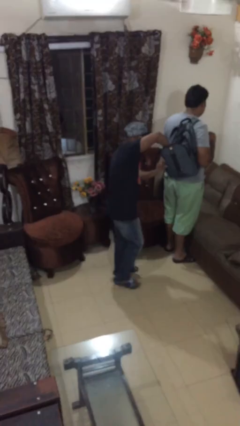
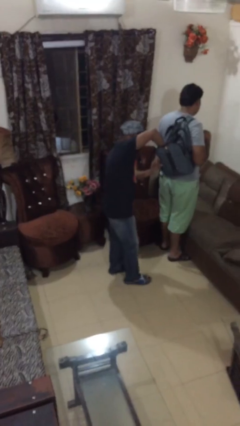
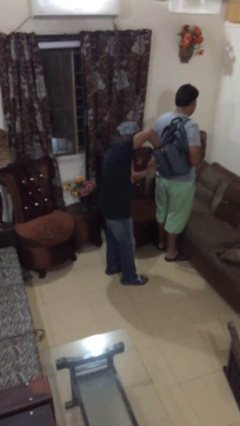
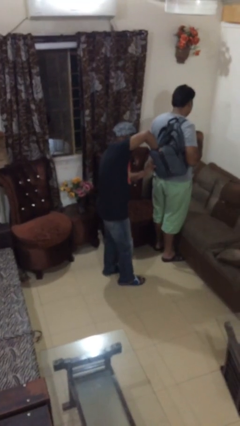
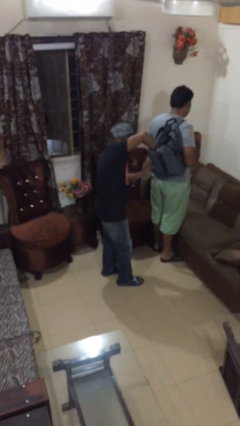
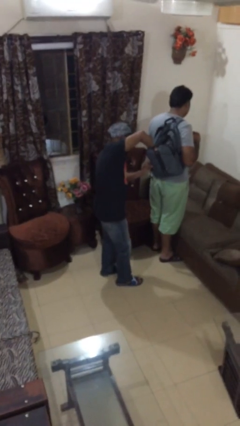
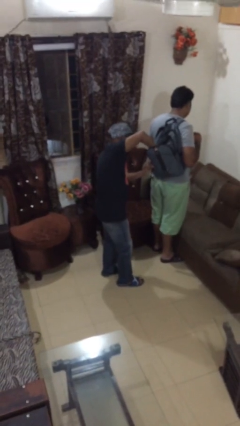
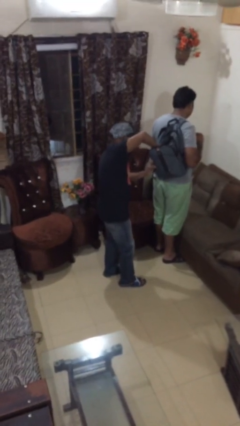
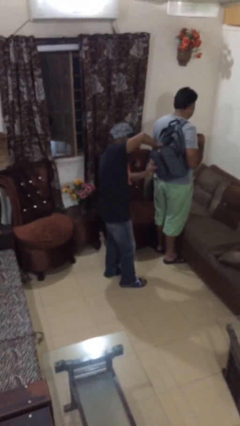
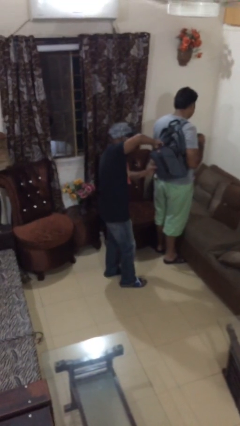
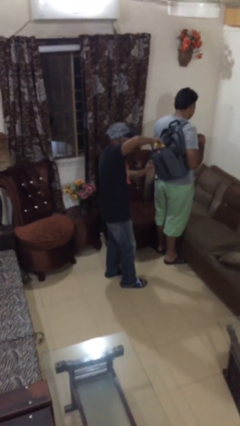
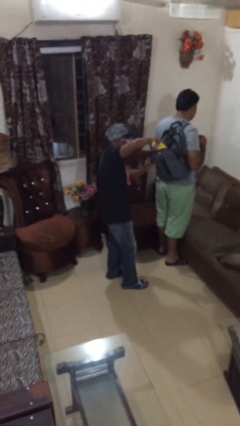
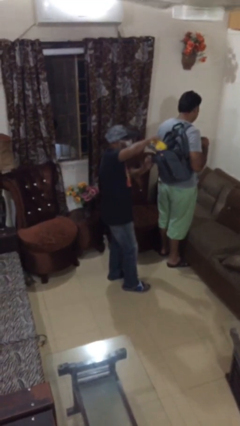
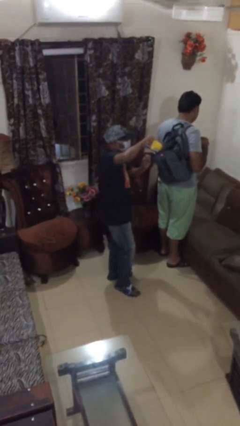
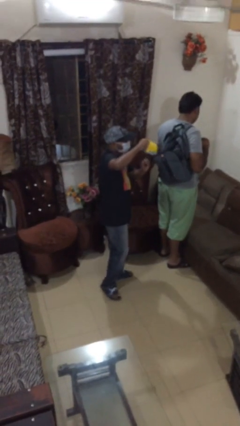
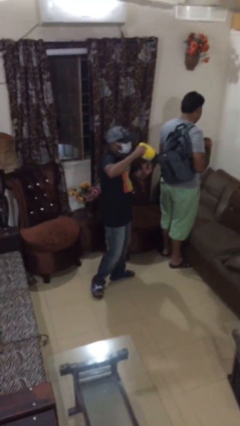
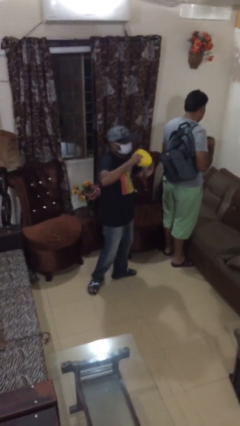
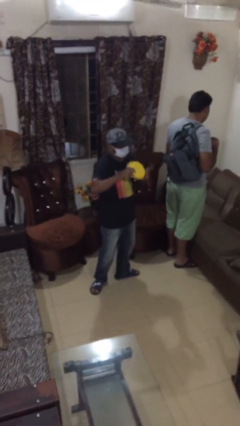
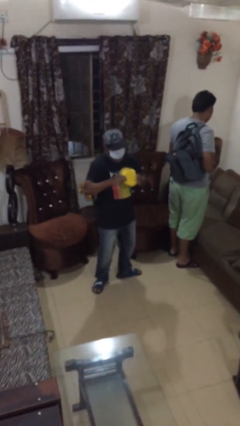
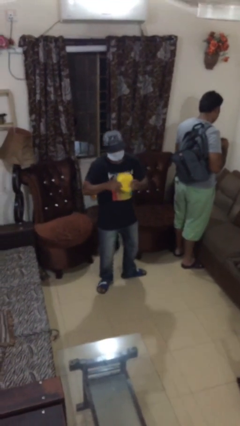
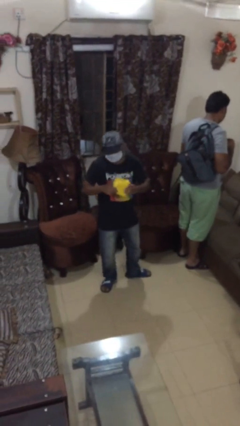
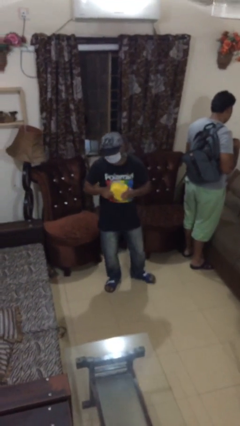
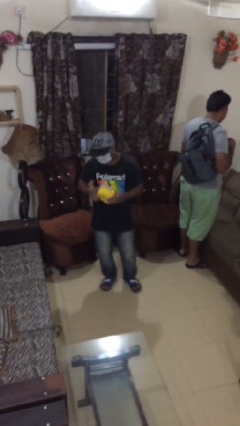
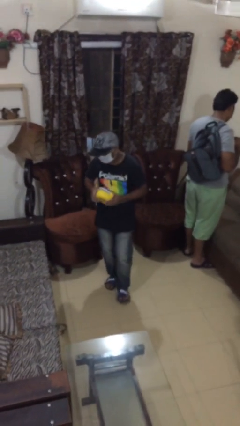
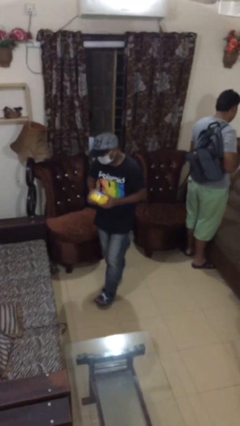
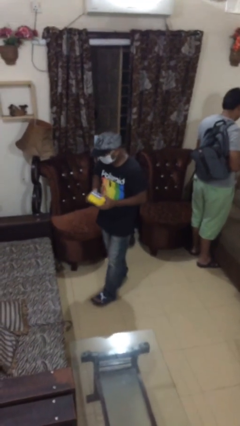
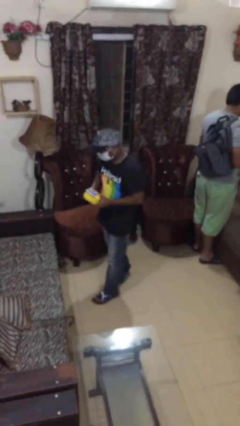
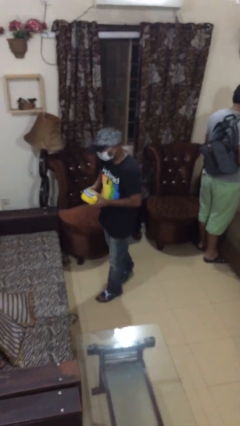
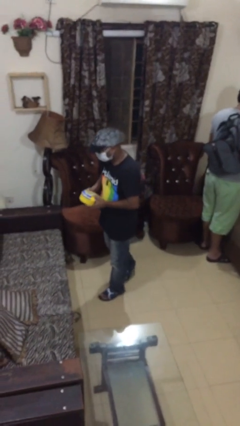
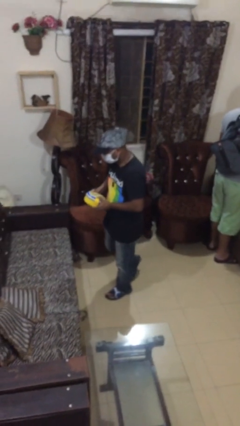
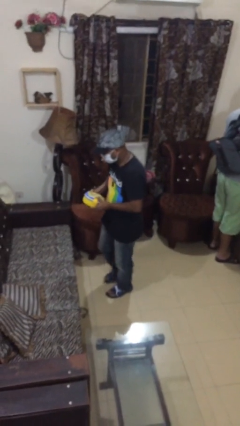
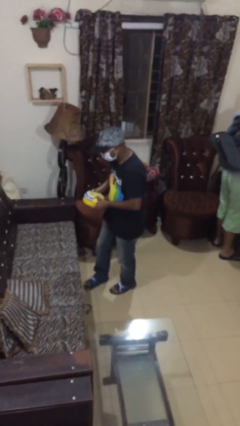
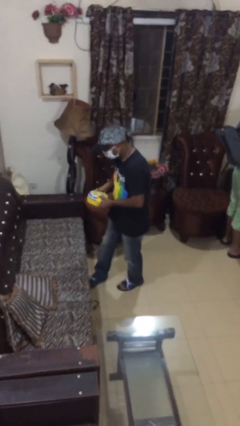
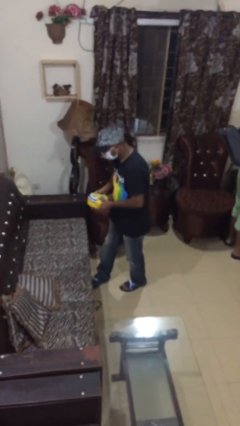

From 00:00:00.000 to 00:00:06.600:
person steals object from person

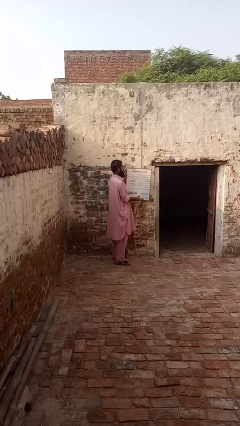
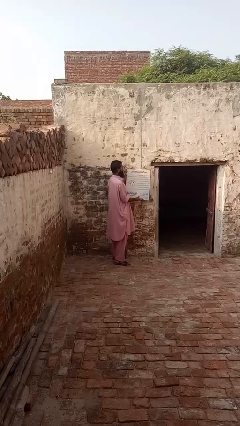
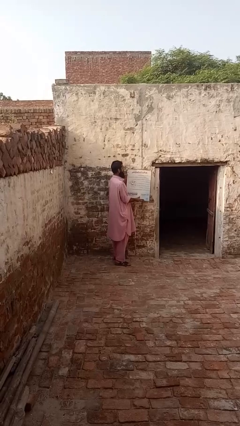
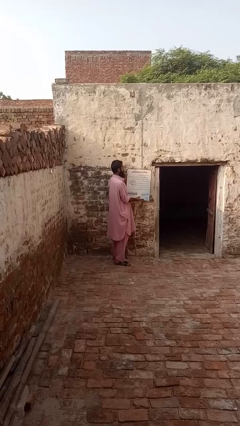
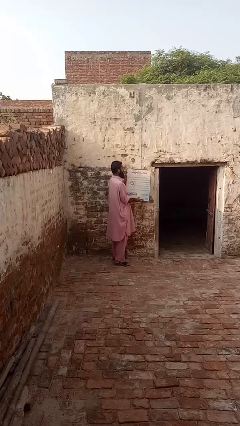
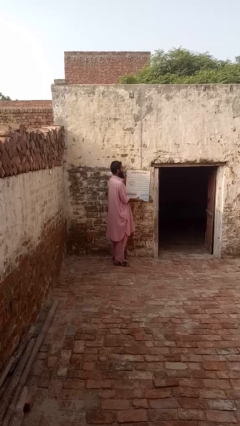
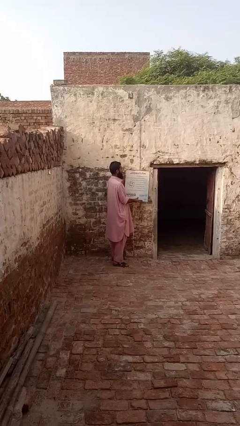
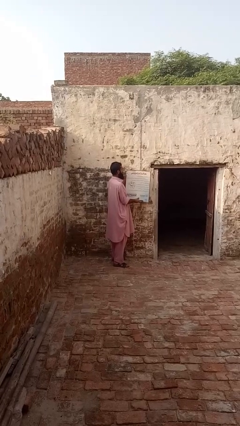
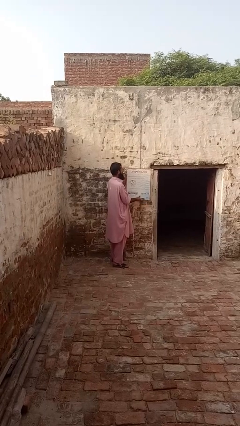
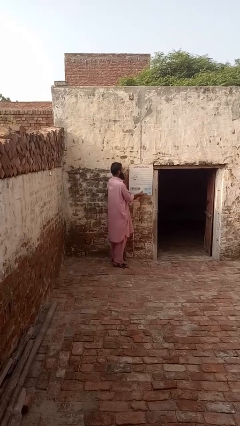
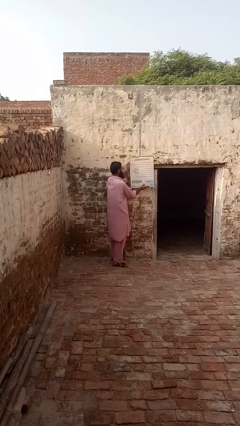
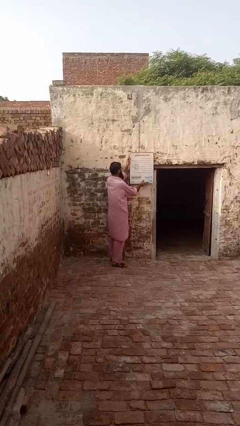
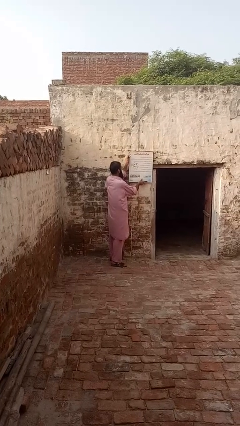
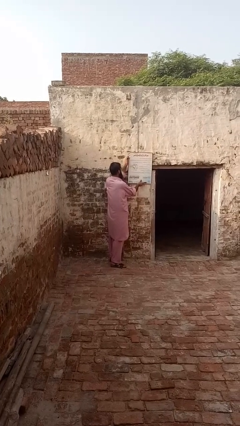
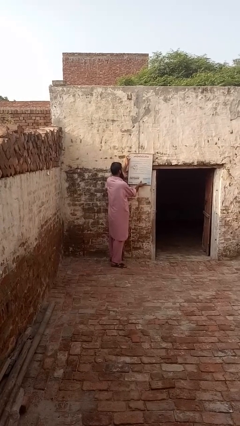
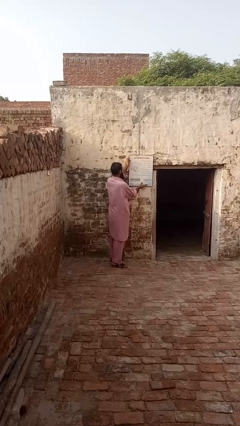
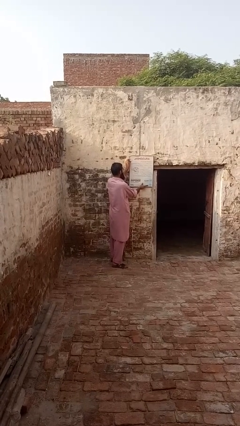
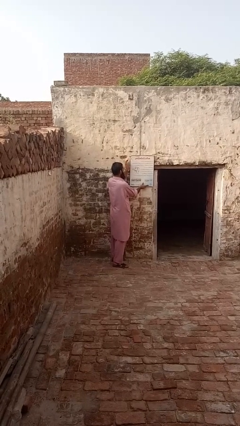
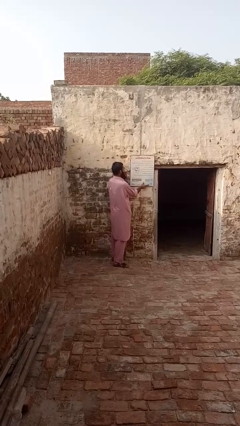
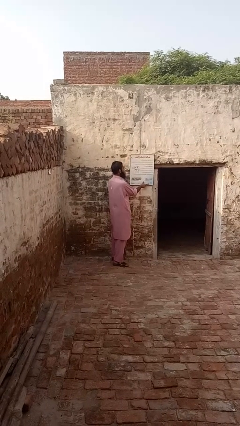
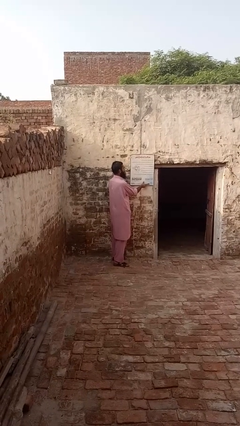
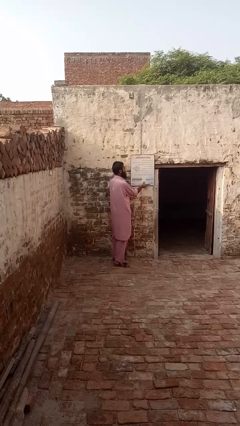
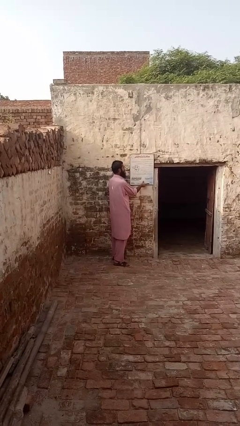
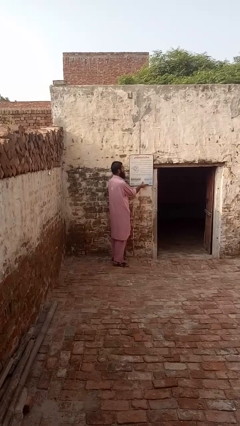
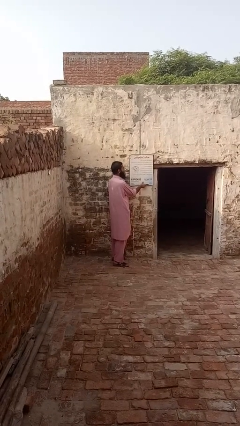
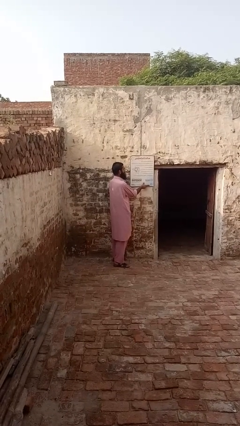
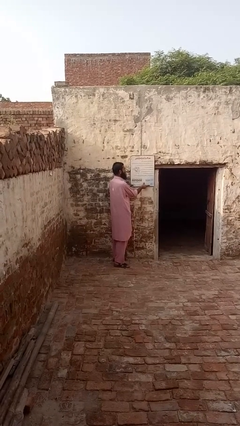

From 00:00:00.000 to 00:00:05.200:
person puts up picture frame

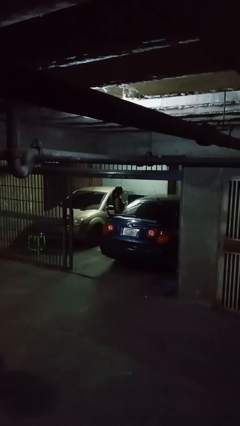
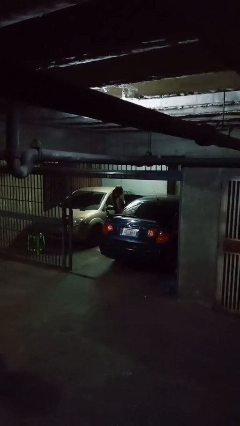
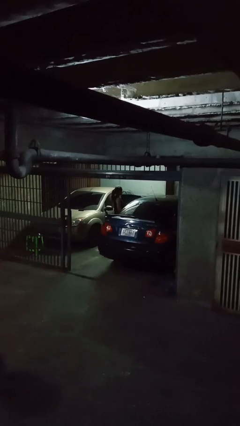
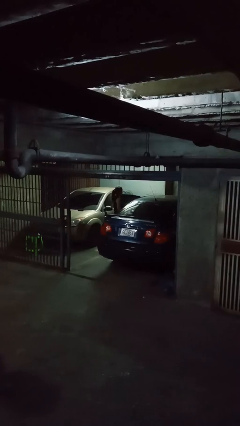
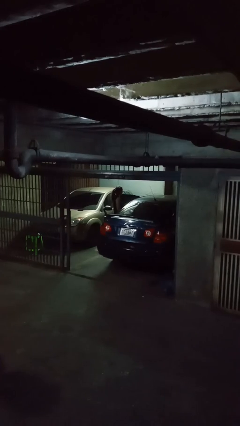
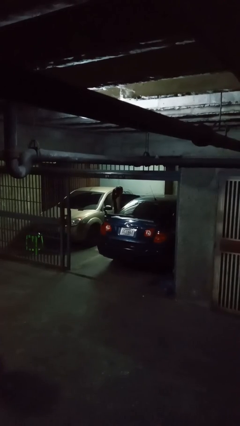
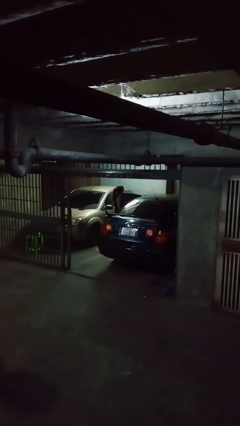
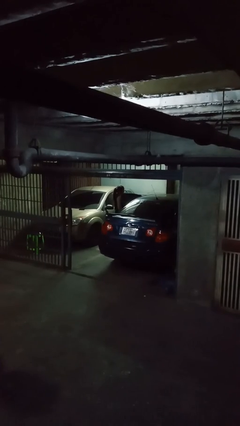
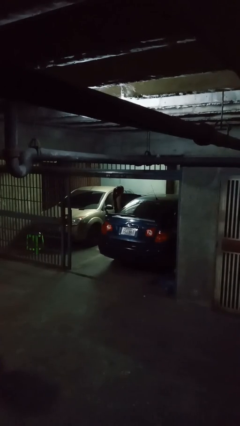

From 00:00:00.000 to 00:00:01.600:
person opens car door

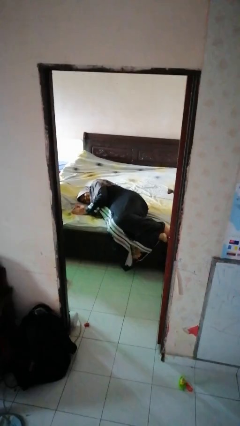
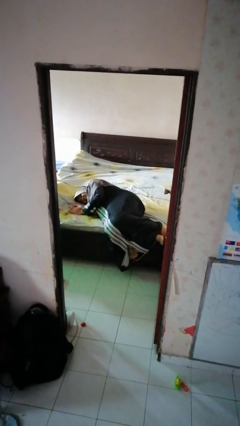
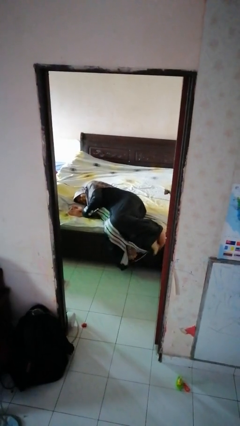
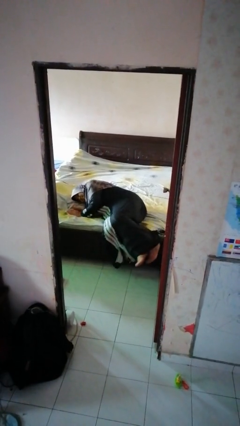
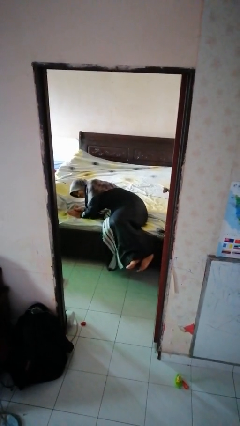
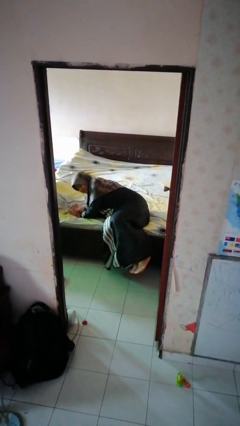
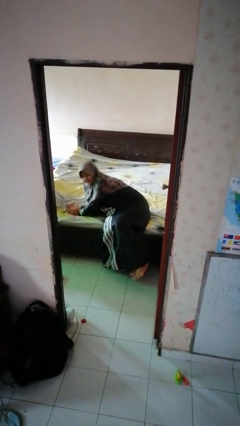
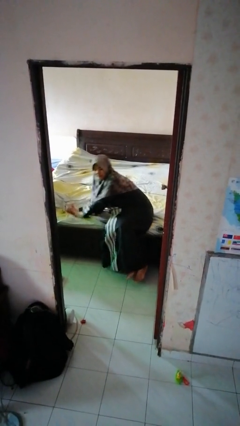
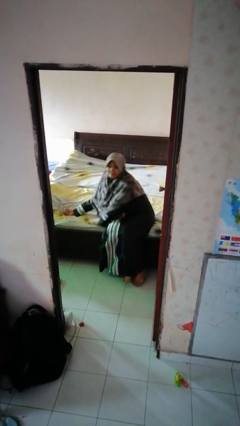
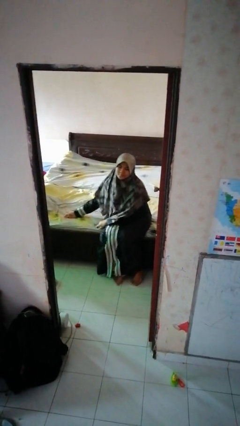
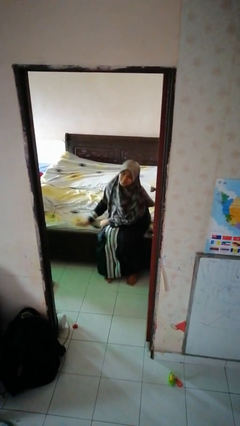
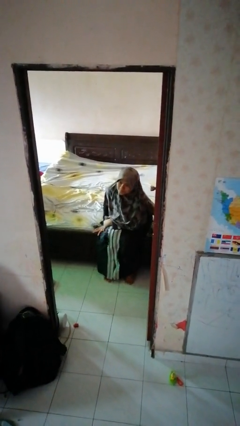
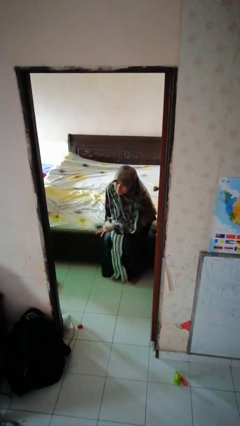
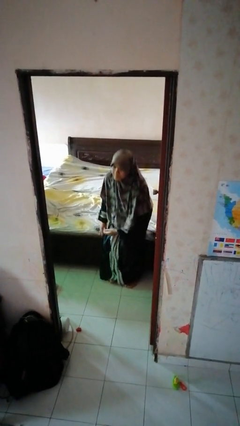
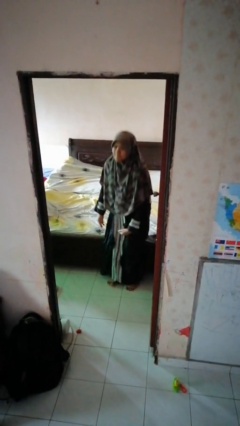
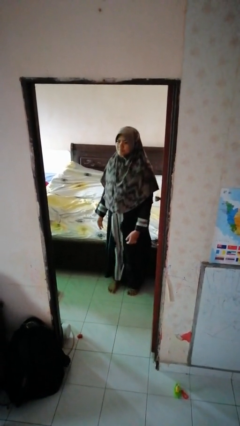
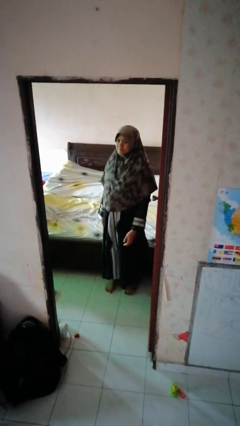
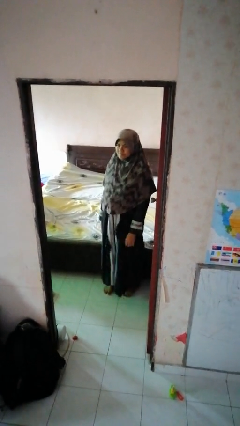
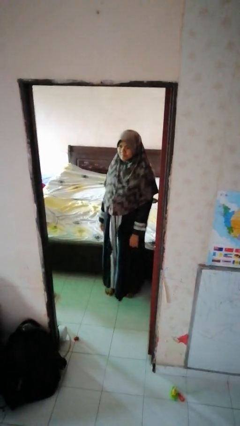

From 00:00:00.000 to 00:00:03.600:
person stands up

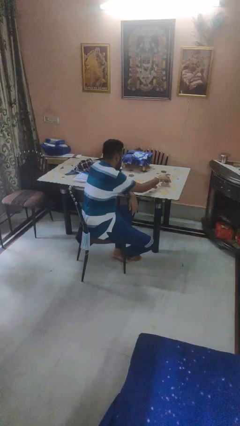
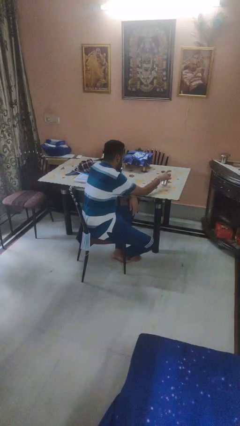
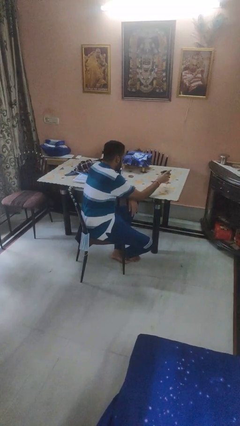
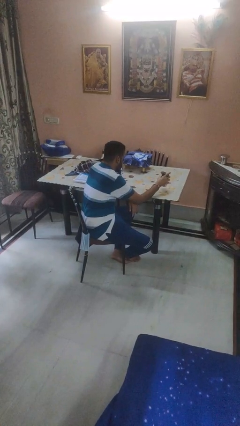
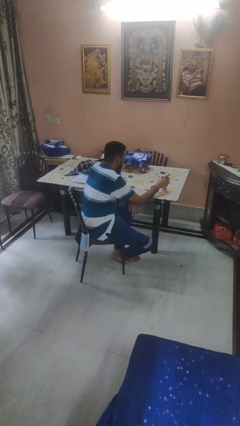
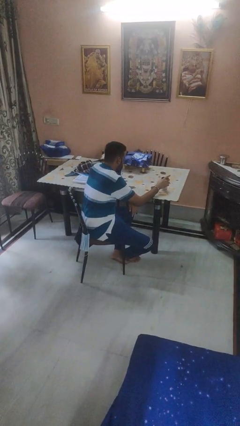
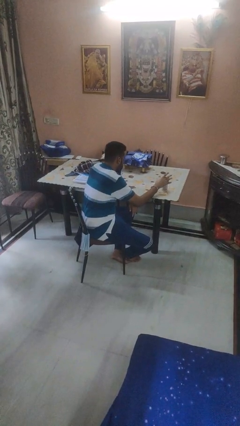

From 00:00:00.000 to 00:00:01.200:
person sets upright glass
